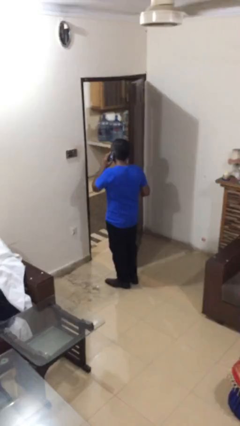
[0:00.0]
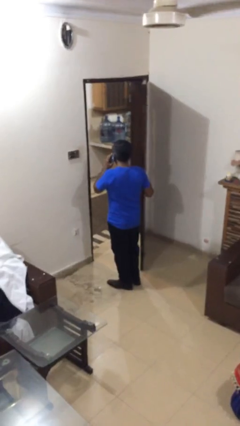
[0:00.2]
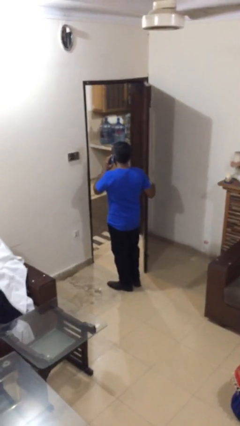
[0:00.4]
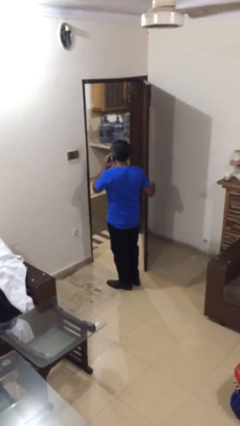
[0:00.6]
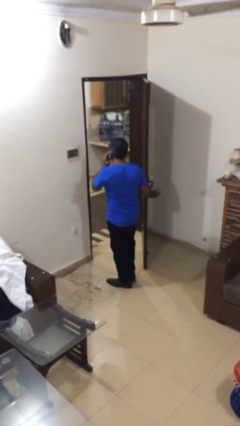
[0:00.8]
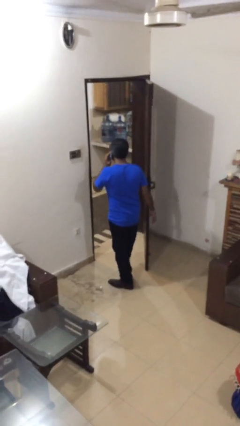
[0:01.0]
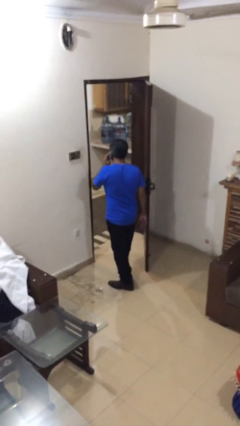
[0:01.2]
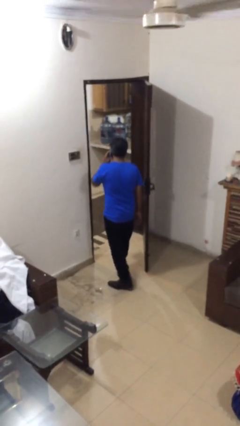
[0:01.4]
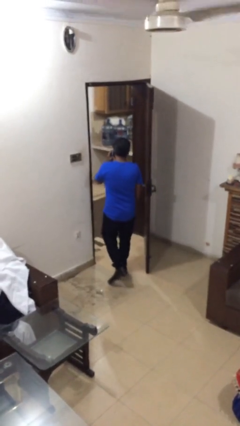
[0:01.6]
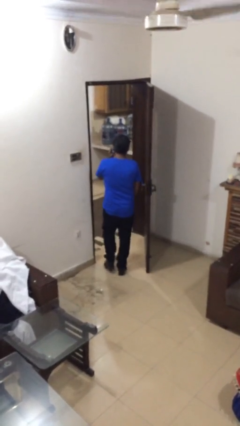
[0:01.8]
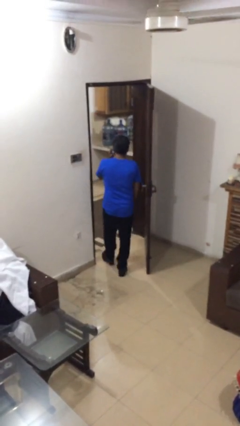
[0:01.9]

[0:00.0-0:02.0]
person exits scene through structure

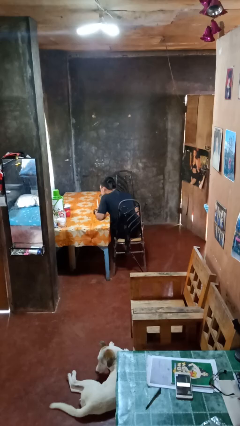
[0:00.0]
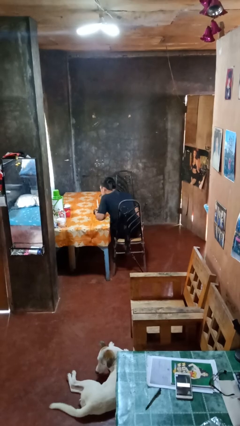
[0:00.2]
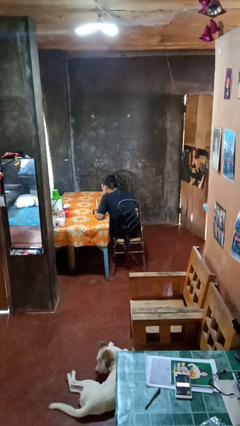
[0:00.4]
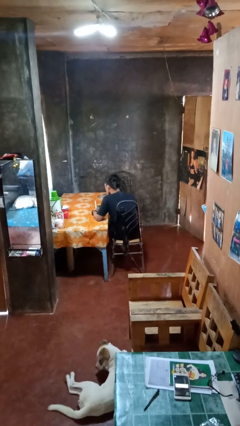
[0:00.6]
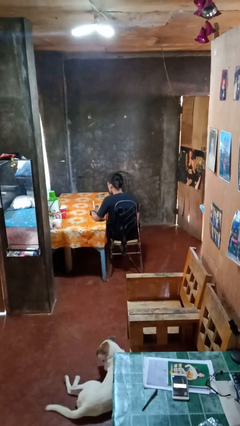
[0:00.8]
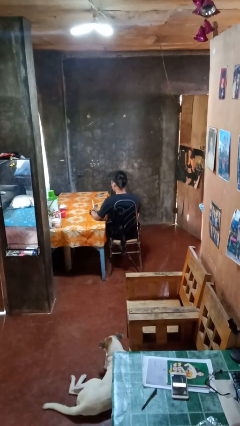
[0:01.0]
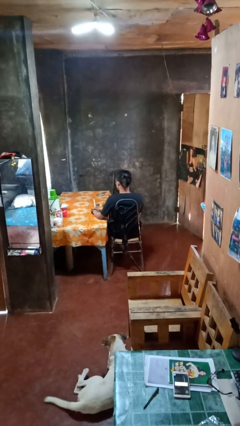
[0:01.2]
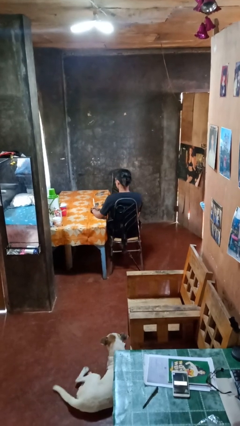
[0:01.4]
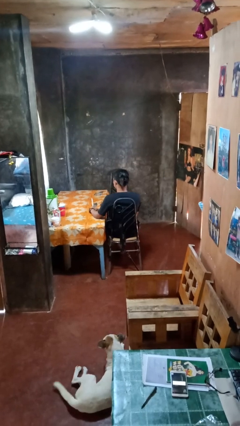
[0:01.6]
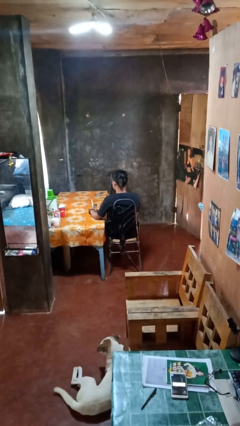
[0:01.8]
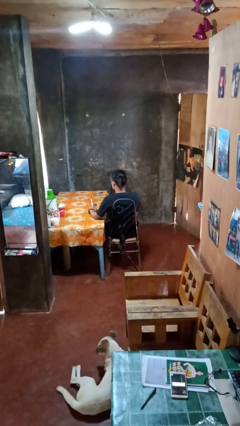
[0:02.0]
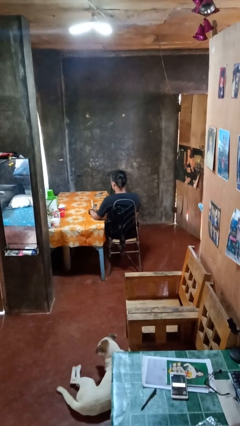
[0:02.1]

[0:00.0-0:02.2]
person extinguishes candle

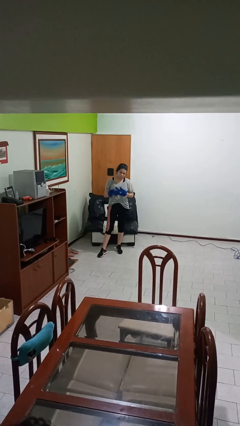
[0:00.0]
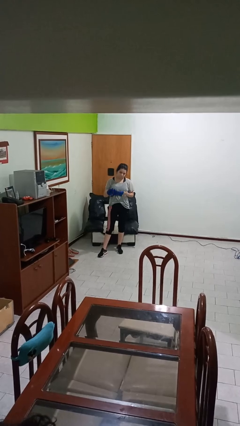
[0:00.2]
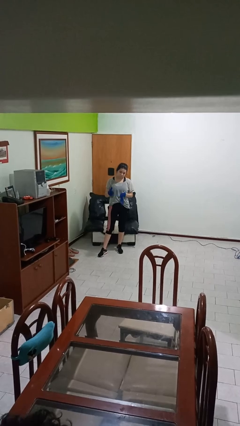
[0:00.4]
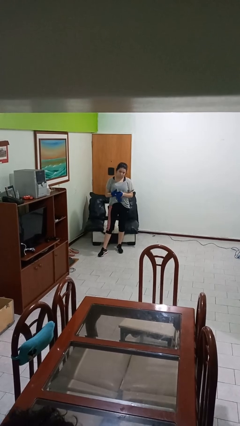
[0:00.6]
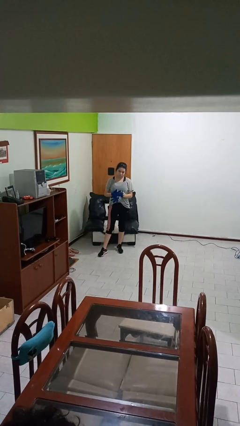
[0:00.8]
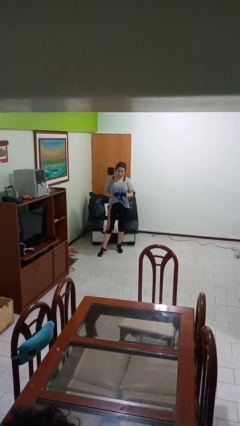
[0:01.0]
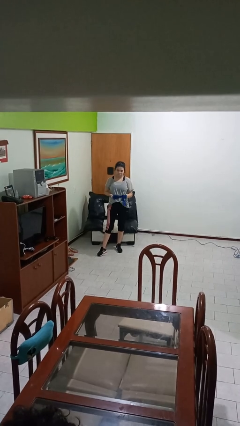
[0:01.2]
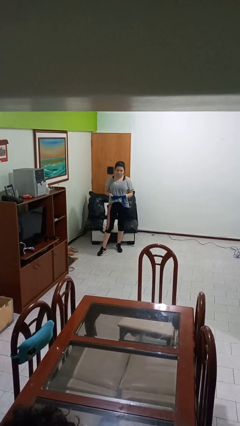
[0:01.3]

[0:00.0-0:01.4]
person takes off gloves

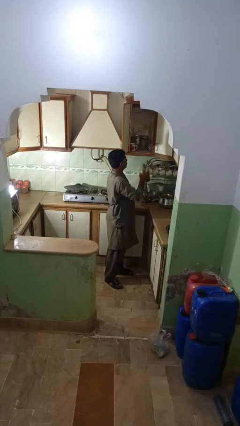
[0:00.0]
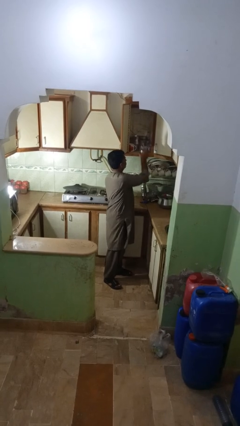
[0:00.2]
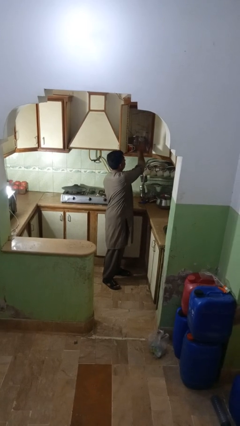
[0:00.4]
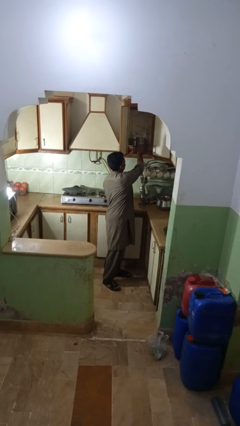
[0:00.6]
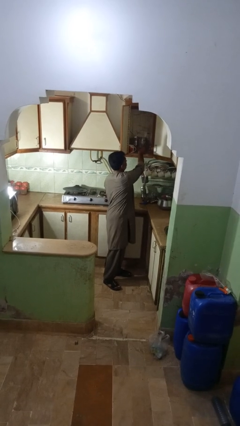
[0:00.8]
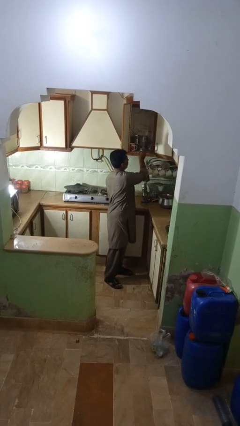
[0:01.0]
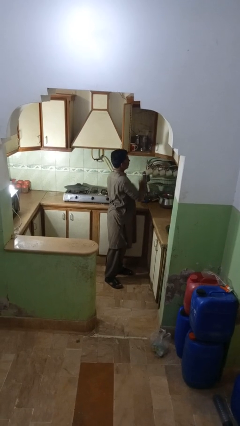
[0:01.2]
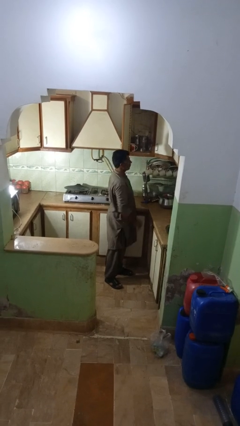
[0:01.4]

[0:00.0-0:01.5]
person puts object into kitchen drawer

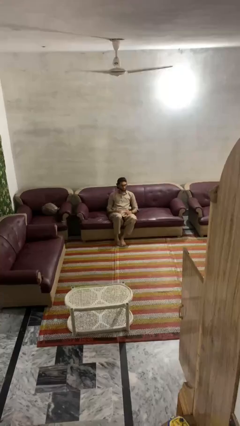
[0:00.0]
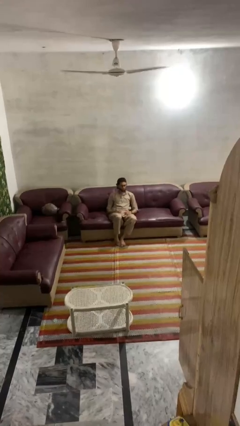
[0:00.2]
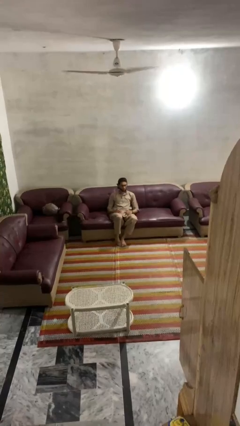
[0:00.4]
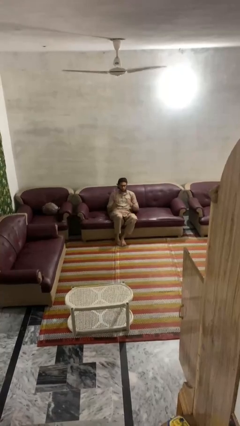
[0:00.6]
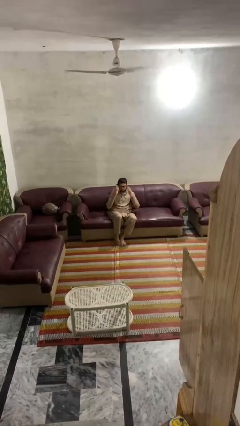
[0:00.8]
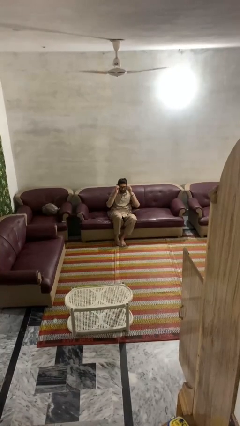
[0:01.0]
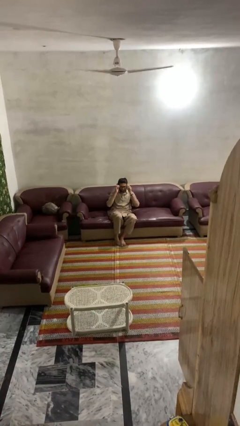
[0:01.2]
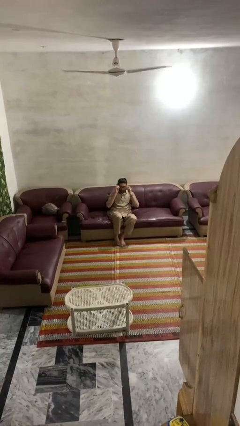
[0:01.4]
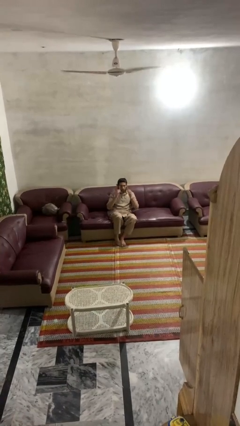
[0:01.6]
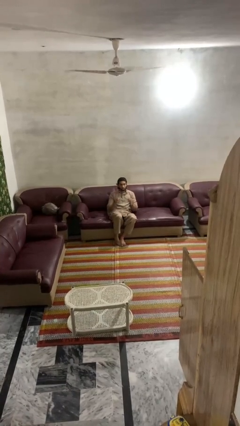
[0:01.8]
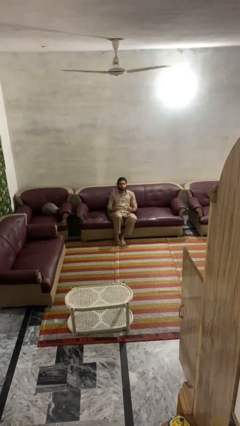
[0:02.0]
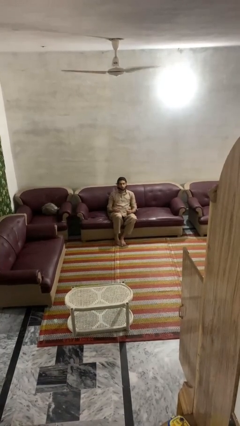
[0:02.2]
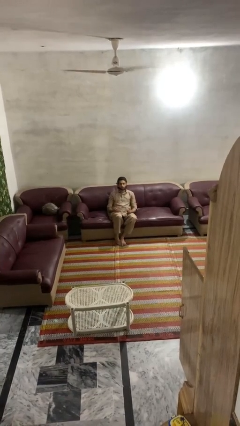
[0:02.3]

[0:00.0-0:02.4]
person takes off glasses

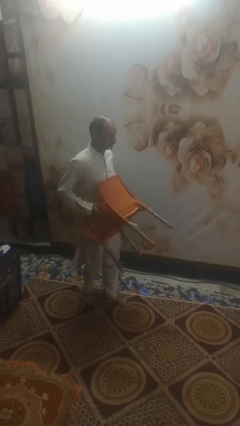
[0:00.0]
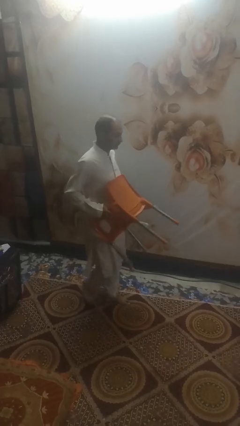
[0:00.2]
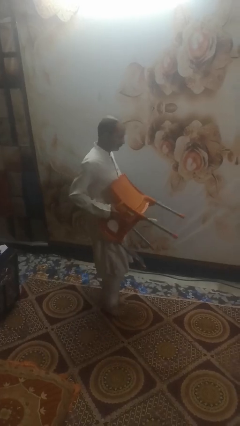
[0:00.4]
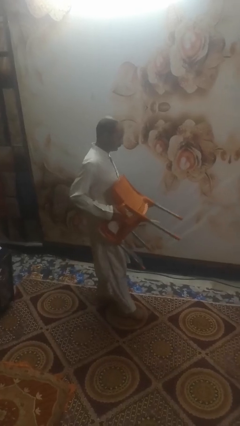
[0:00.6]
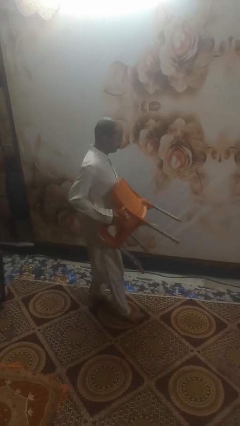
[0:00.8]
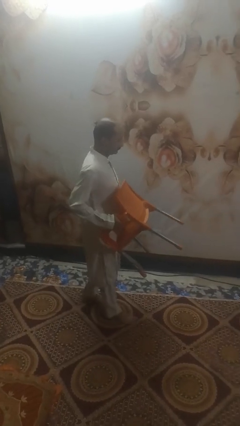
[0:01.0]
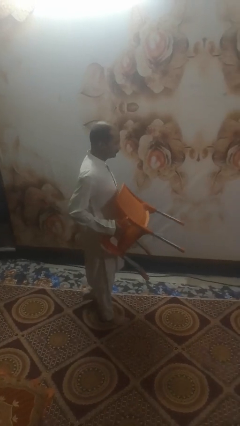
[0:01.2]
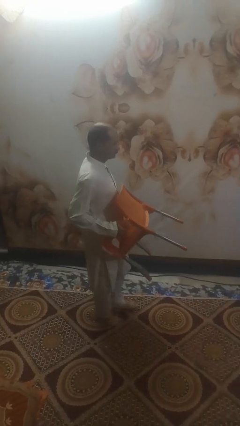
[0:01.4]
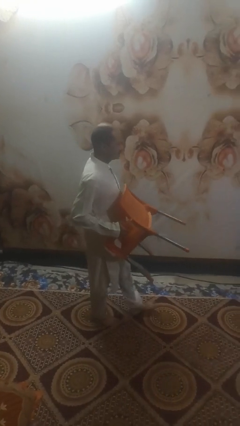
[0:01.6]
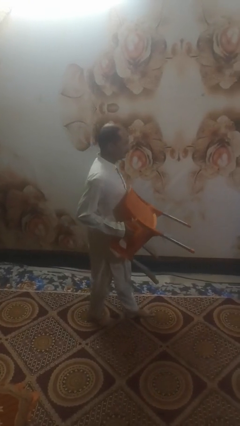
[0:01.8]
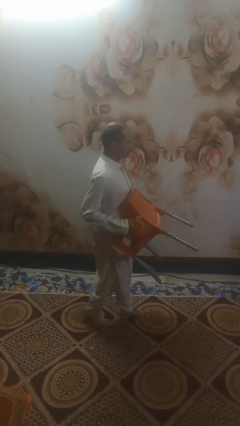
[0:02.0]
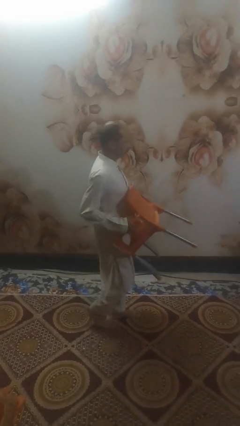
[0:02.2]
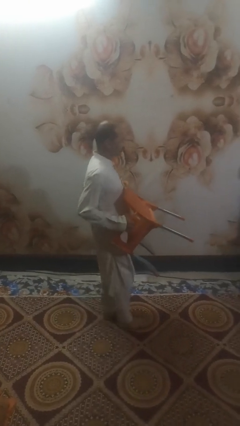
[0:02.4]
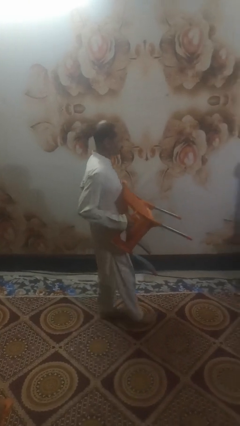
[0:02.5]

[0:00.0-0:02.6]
person carries furniture

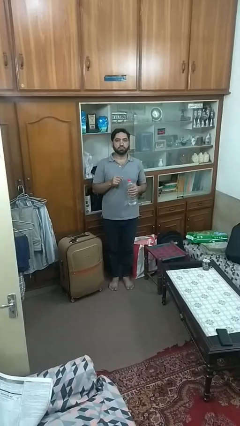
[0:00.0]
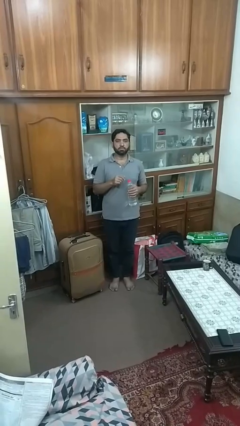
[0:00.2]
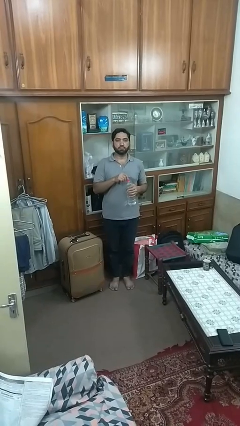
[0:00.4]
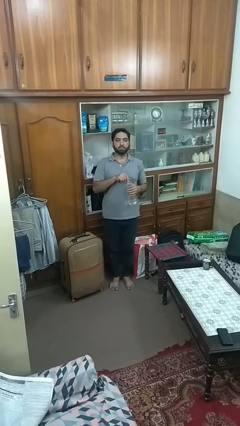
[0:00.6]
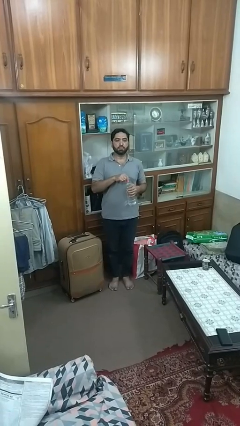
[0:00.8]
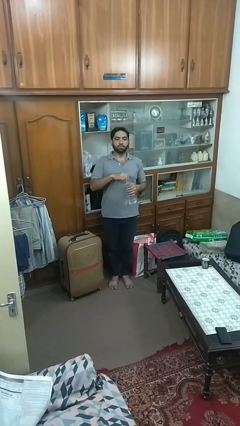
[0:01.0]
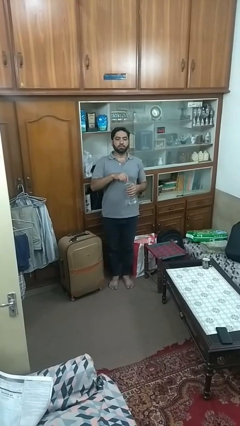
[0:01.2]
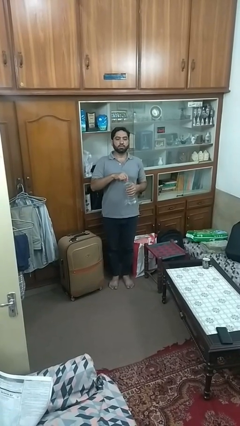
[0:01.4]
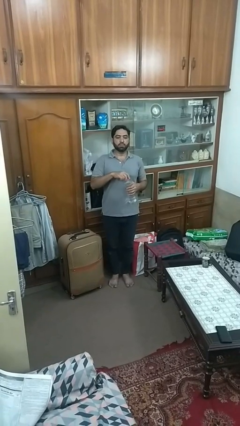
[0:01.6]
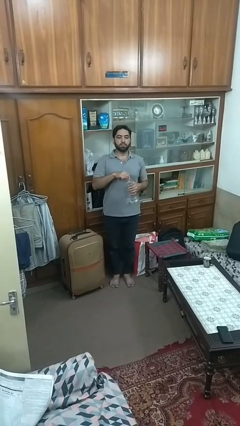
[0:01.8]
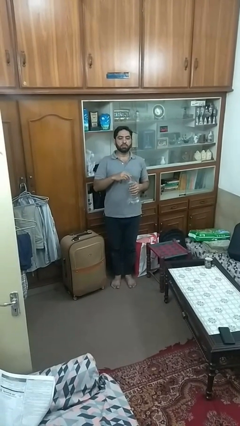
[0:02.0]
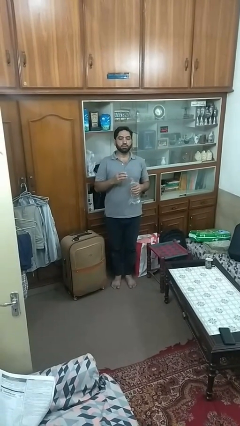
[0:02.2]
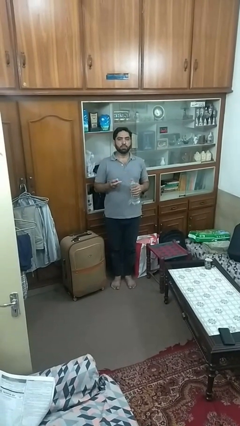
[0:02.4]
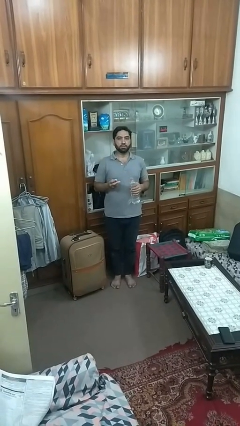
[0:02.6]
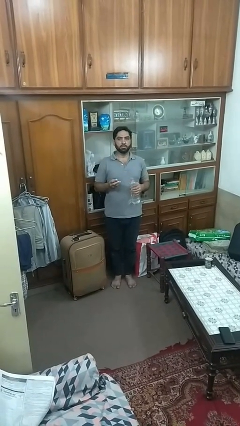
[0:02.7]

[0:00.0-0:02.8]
person unscrews lid from bottle

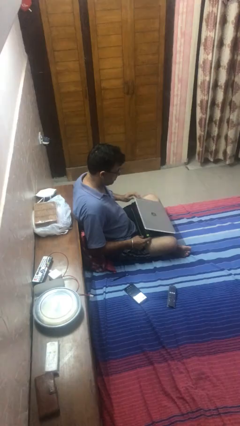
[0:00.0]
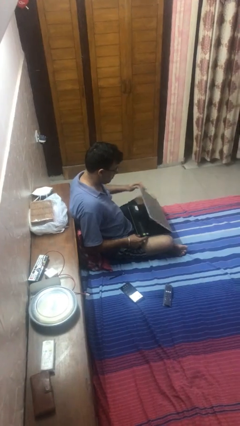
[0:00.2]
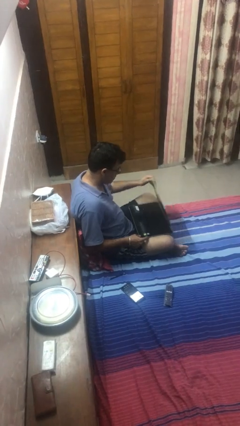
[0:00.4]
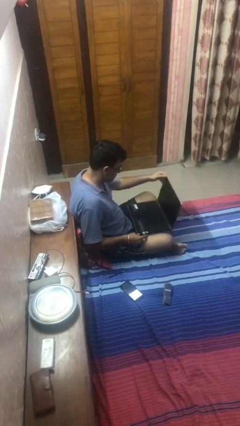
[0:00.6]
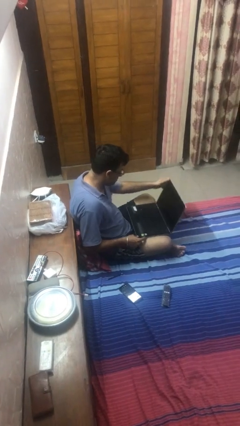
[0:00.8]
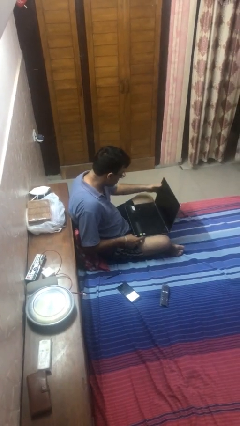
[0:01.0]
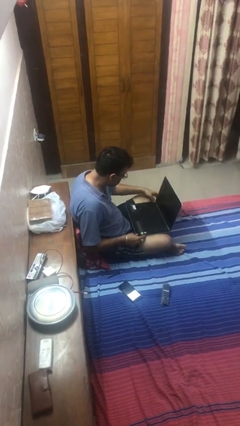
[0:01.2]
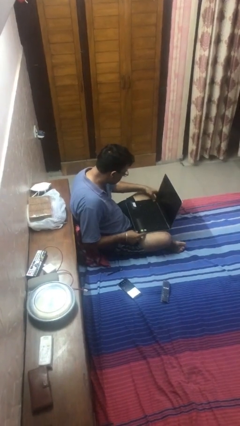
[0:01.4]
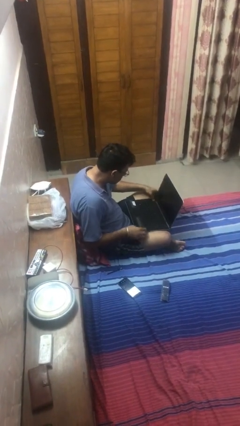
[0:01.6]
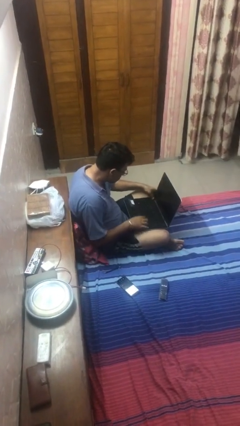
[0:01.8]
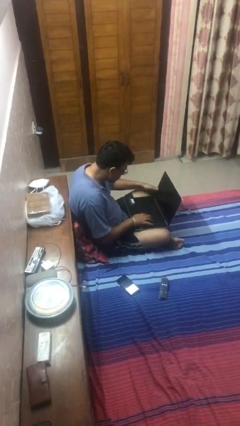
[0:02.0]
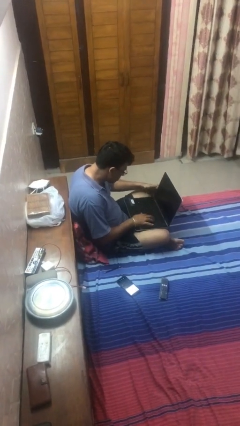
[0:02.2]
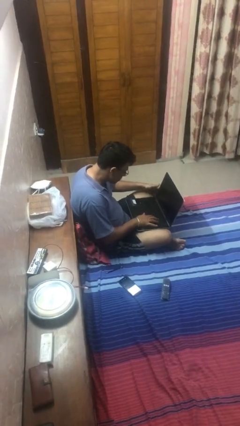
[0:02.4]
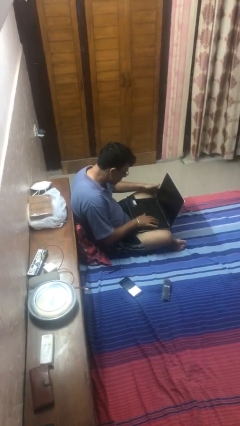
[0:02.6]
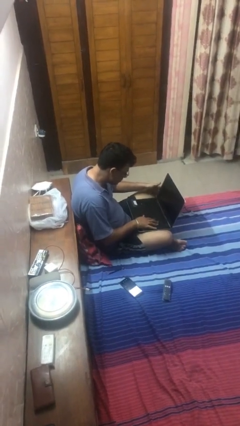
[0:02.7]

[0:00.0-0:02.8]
person opens laptop
